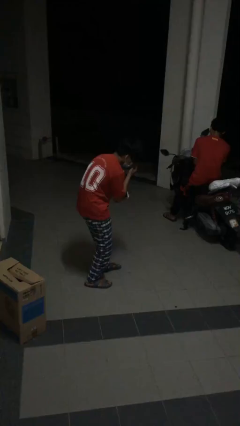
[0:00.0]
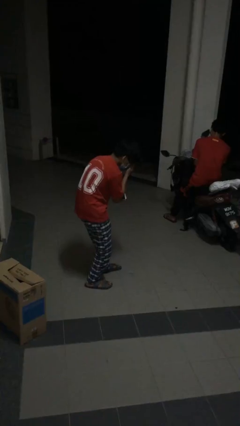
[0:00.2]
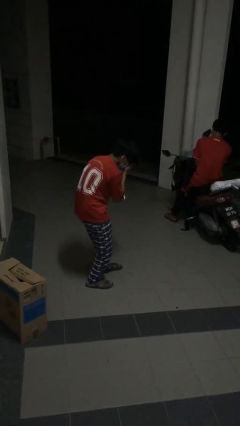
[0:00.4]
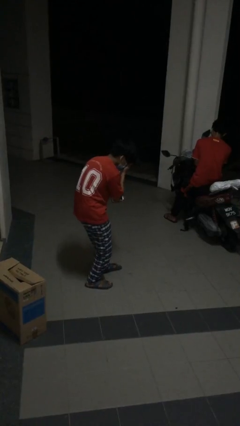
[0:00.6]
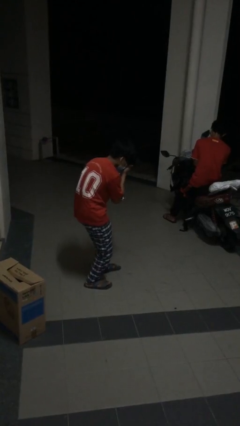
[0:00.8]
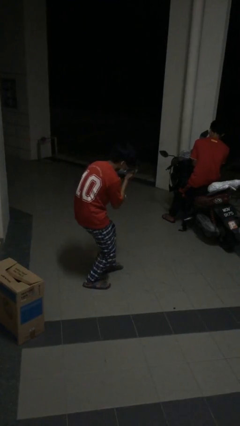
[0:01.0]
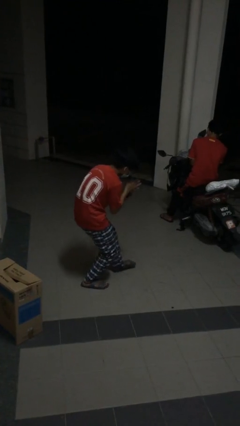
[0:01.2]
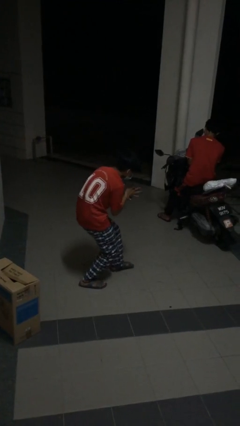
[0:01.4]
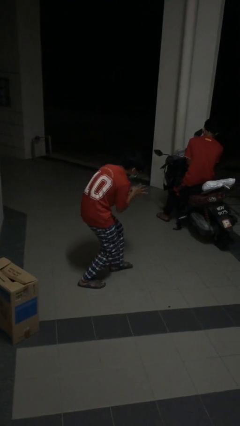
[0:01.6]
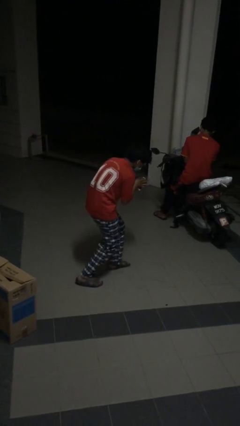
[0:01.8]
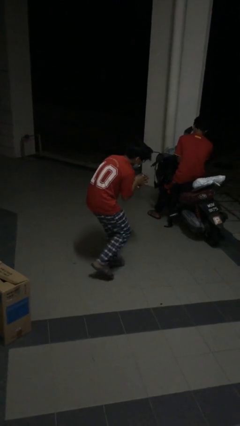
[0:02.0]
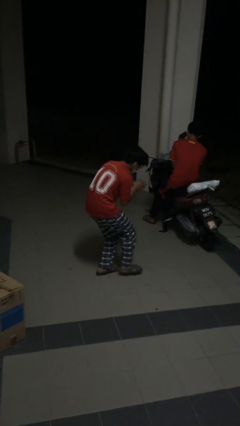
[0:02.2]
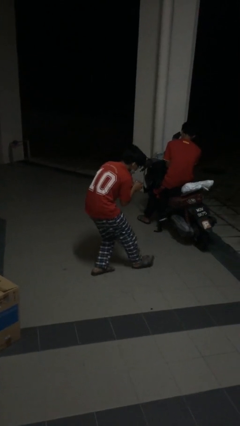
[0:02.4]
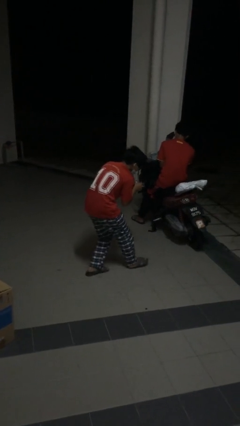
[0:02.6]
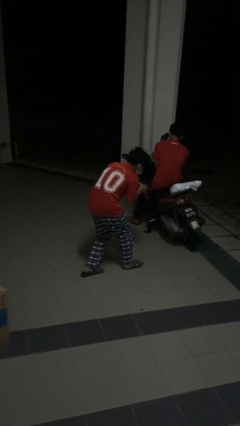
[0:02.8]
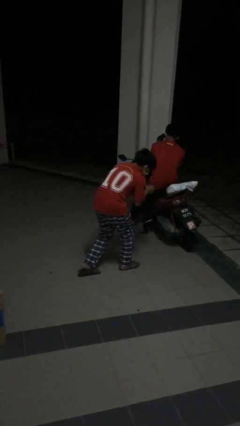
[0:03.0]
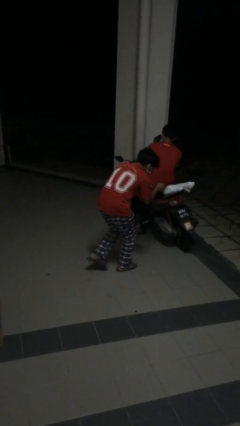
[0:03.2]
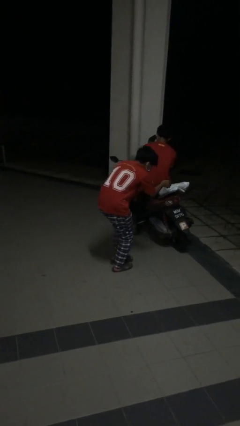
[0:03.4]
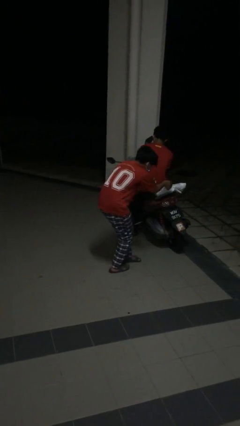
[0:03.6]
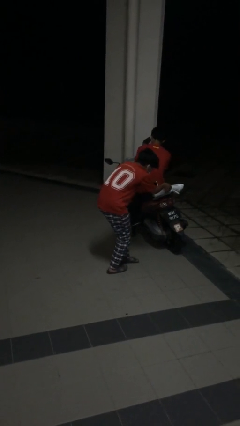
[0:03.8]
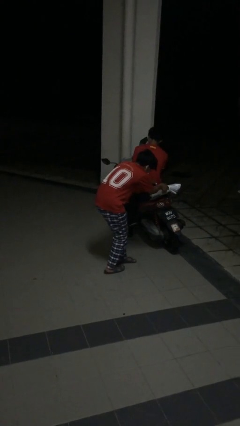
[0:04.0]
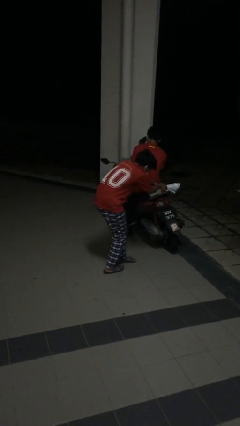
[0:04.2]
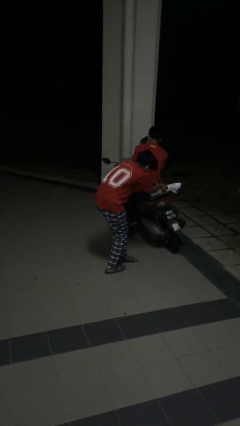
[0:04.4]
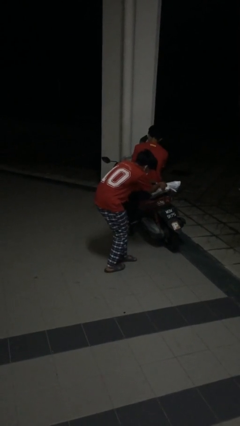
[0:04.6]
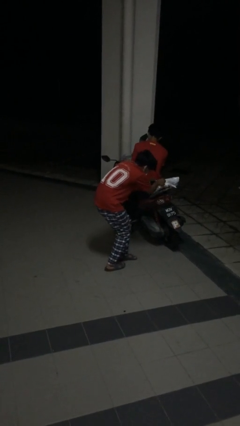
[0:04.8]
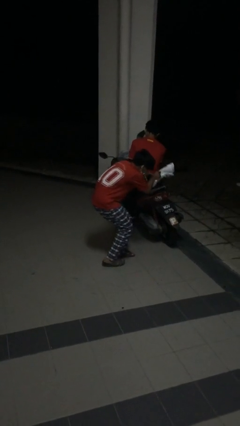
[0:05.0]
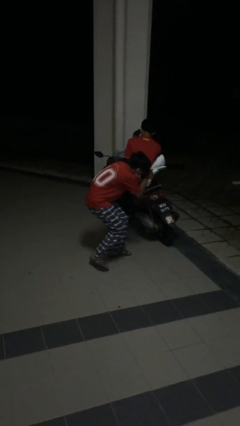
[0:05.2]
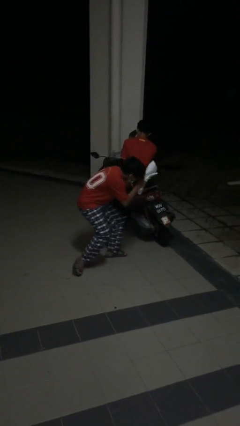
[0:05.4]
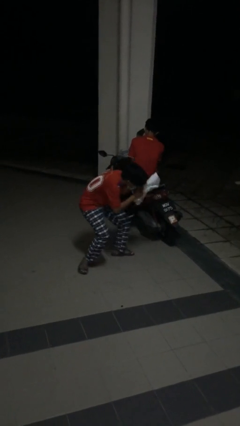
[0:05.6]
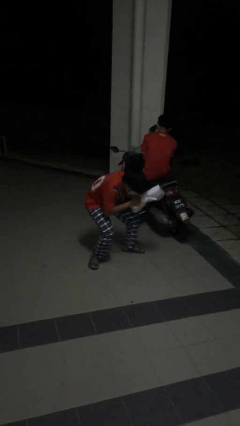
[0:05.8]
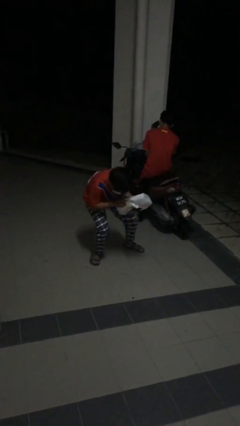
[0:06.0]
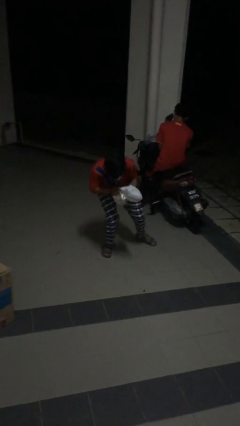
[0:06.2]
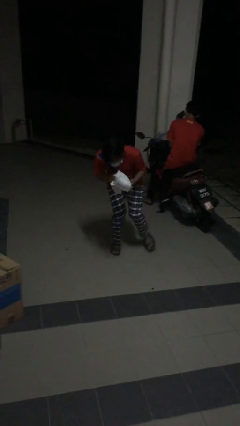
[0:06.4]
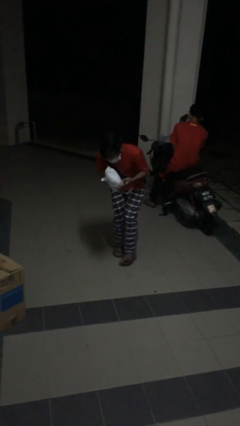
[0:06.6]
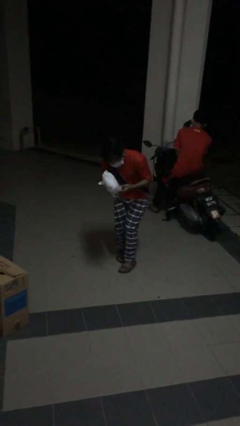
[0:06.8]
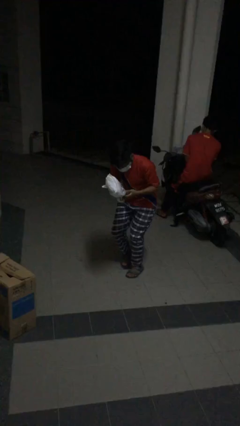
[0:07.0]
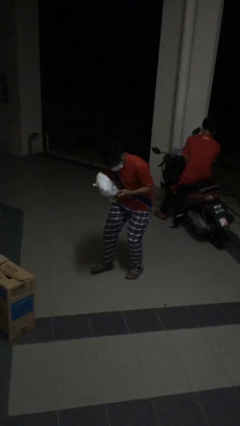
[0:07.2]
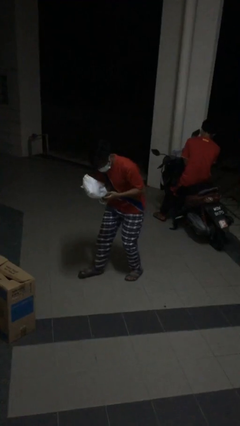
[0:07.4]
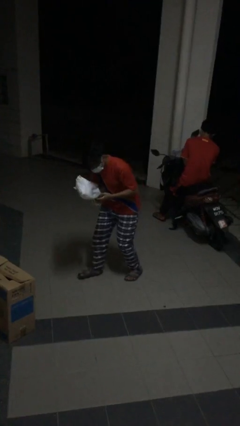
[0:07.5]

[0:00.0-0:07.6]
person steals object from person

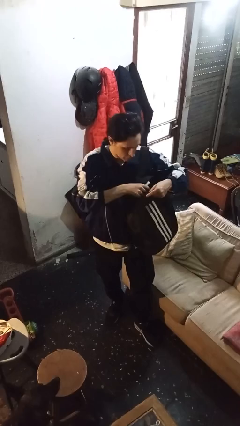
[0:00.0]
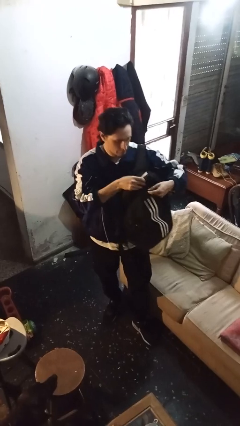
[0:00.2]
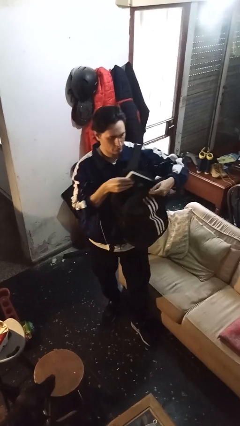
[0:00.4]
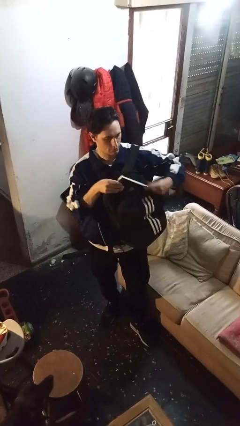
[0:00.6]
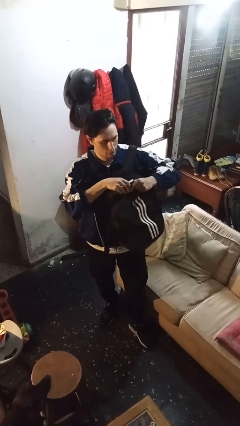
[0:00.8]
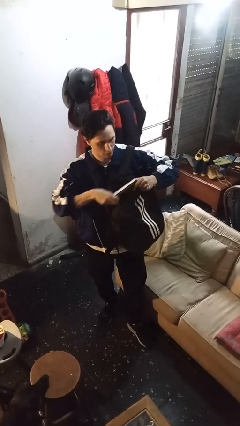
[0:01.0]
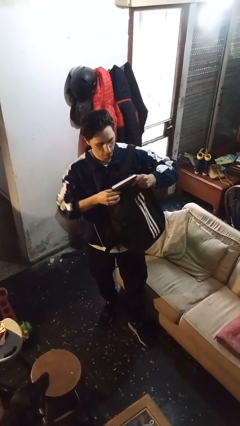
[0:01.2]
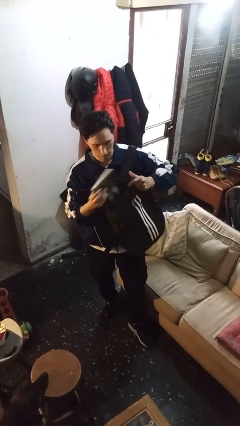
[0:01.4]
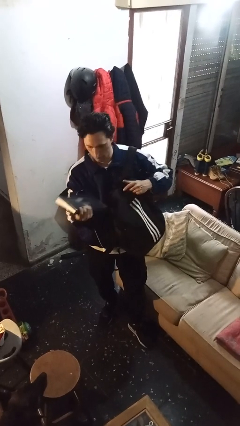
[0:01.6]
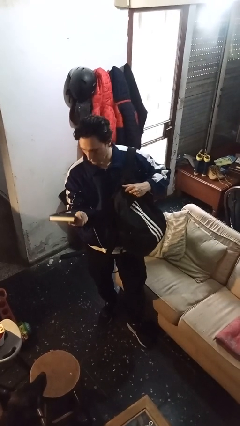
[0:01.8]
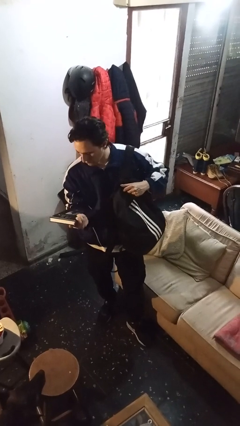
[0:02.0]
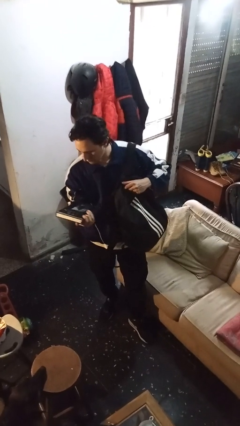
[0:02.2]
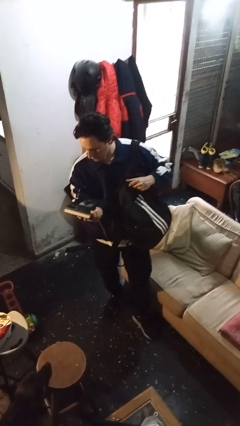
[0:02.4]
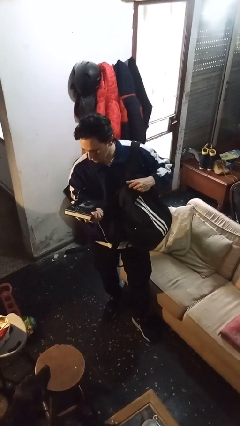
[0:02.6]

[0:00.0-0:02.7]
person takes object from backpack

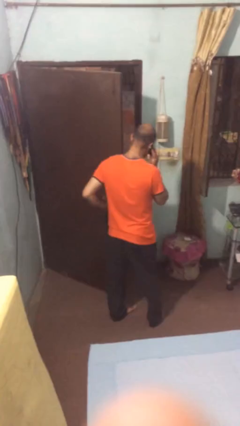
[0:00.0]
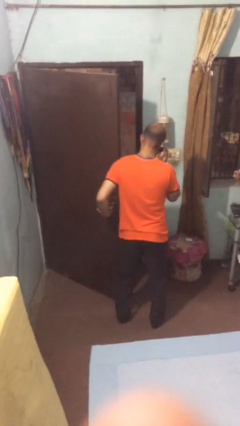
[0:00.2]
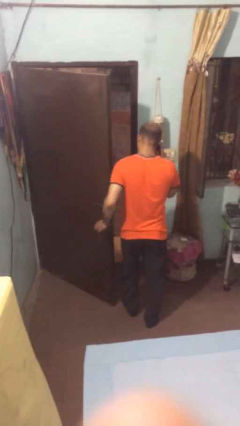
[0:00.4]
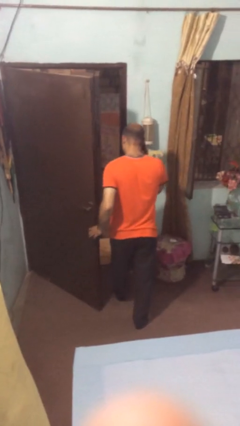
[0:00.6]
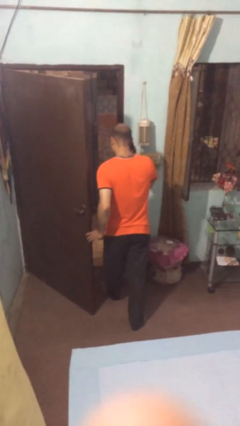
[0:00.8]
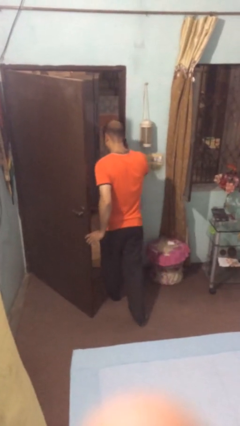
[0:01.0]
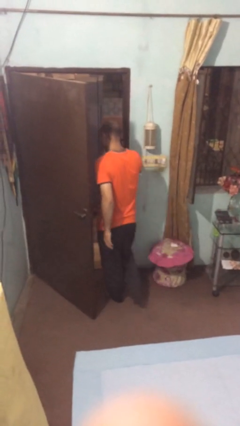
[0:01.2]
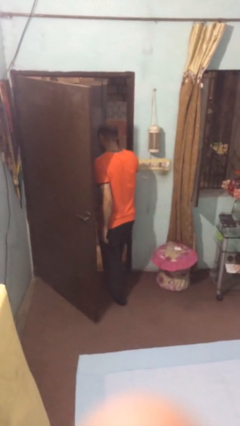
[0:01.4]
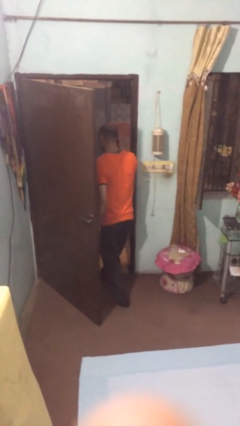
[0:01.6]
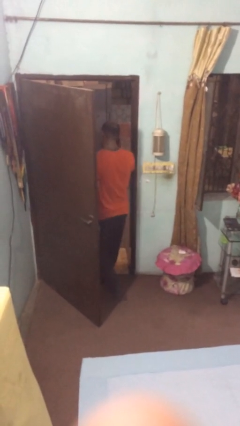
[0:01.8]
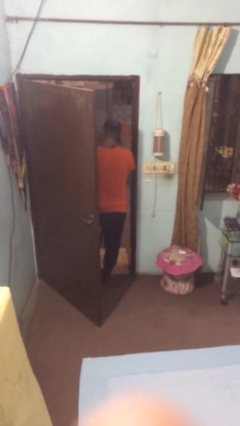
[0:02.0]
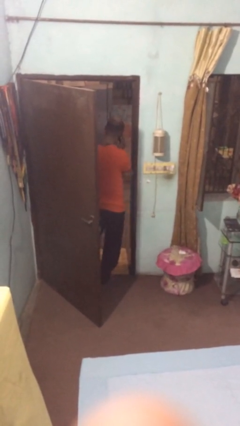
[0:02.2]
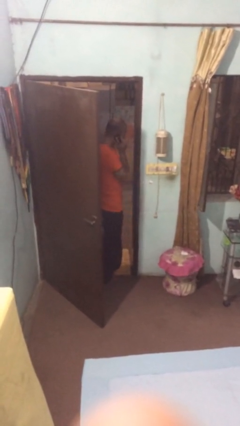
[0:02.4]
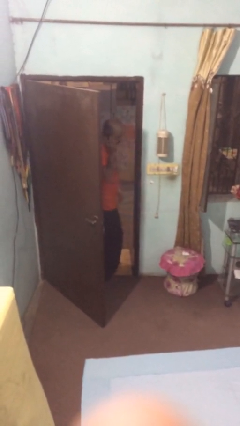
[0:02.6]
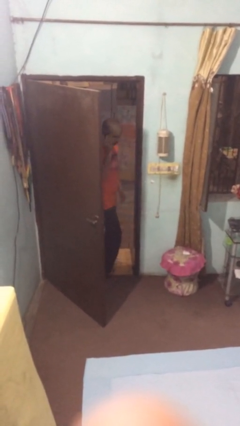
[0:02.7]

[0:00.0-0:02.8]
person exits scene through structure

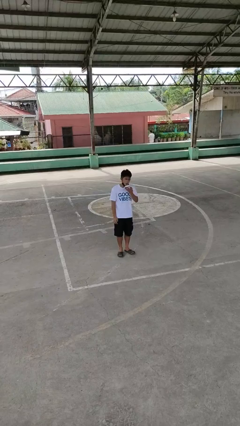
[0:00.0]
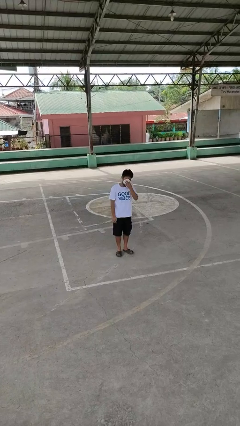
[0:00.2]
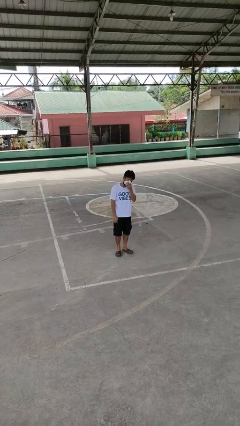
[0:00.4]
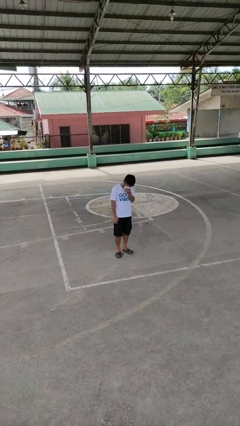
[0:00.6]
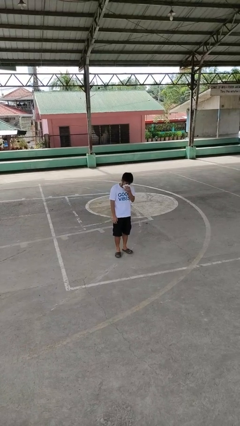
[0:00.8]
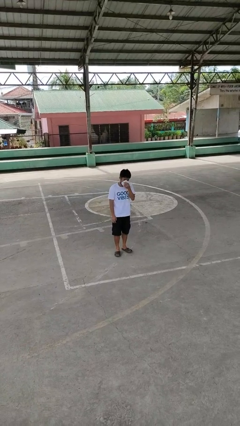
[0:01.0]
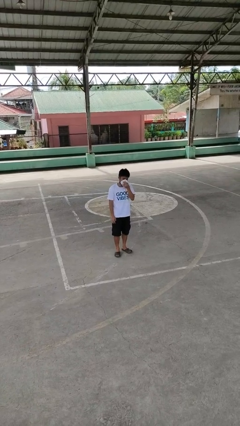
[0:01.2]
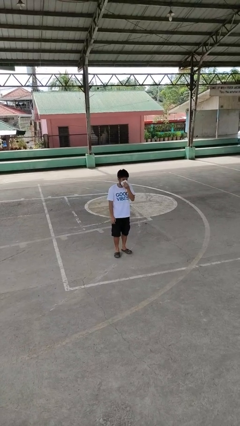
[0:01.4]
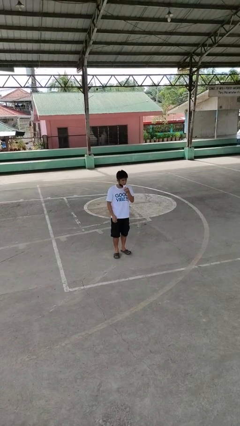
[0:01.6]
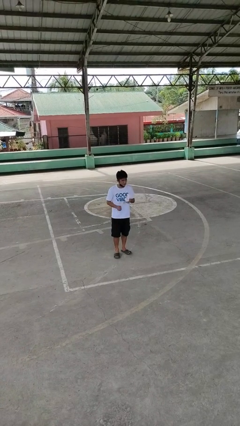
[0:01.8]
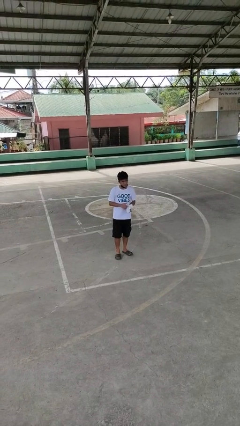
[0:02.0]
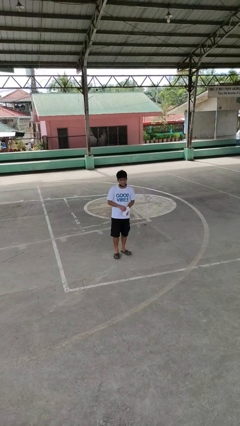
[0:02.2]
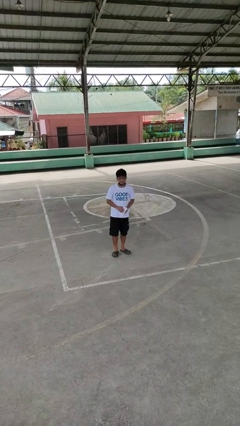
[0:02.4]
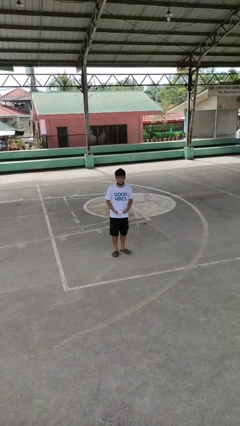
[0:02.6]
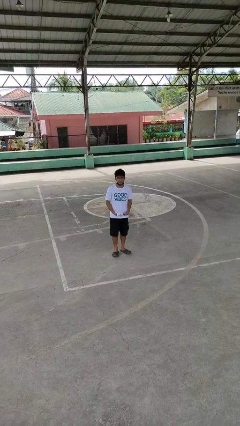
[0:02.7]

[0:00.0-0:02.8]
person holds object above head

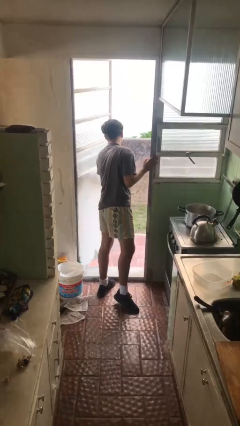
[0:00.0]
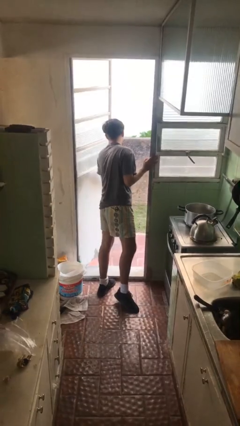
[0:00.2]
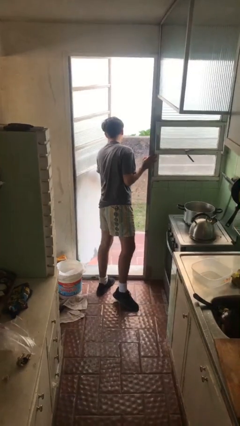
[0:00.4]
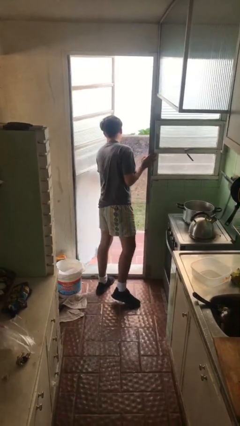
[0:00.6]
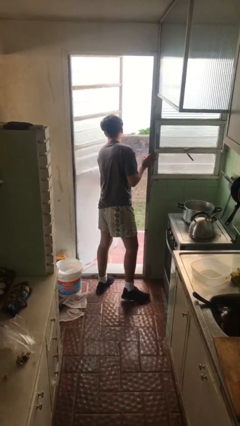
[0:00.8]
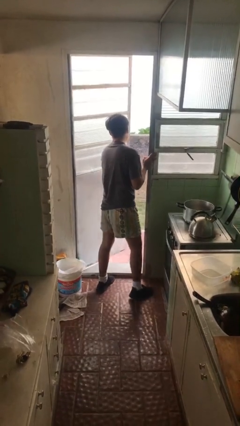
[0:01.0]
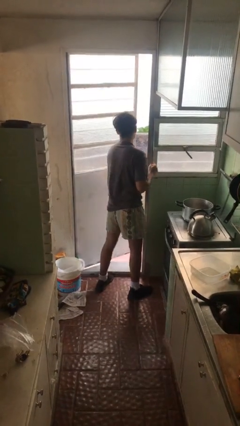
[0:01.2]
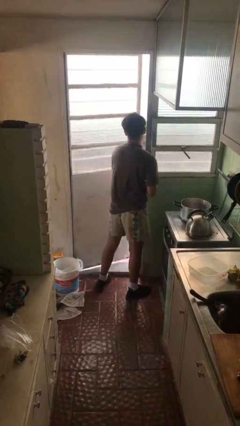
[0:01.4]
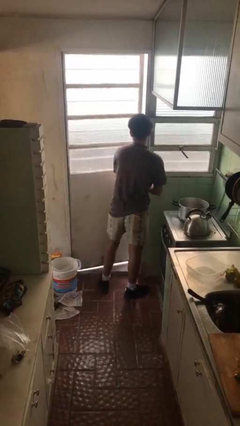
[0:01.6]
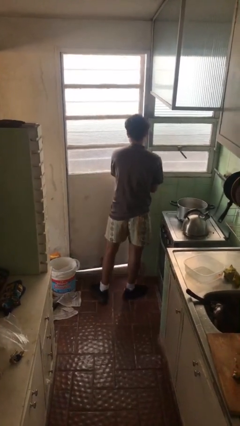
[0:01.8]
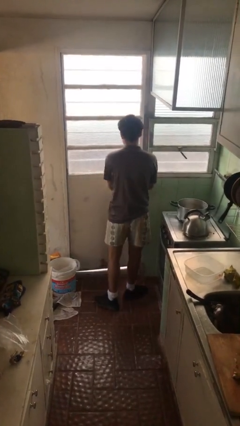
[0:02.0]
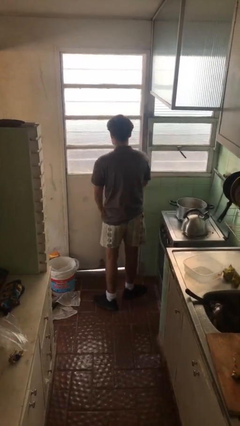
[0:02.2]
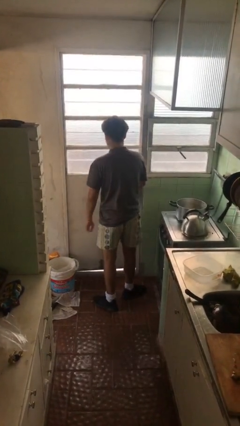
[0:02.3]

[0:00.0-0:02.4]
person closes facility door
